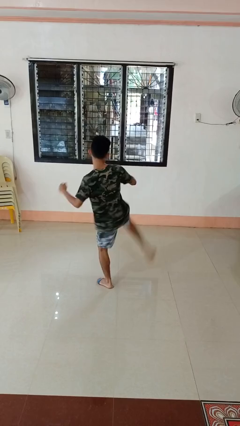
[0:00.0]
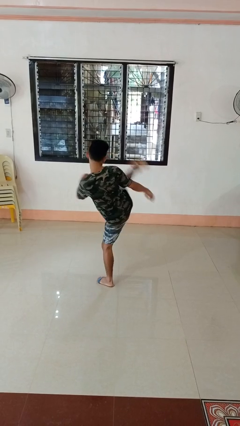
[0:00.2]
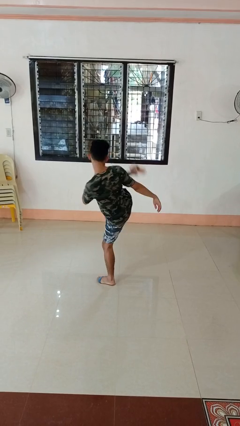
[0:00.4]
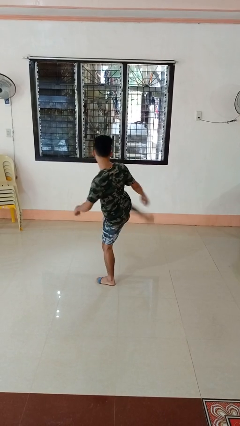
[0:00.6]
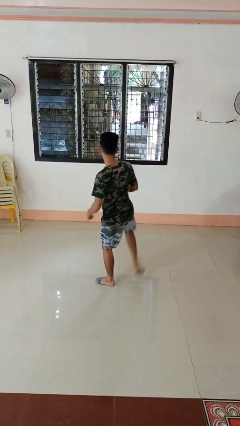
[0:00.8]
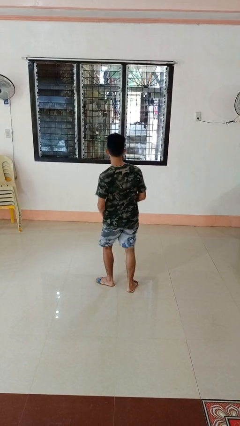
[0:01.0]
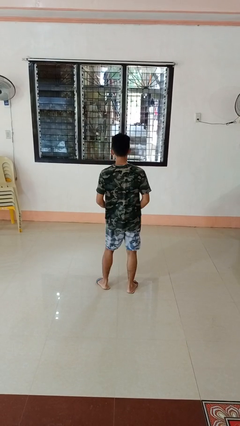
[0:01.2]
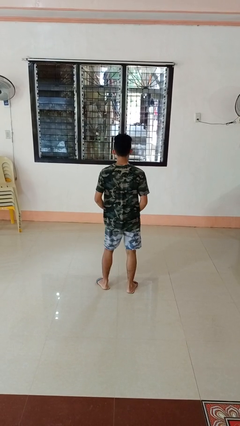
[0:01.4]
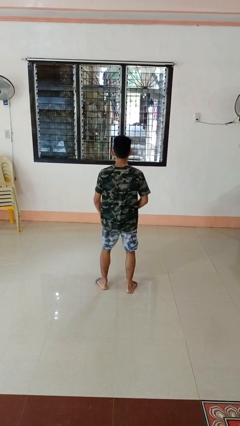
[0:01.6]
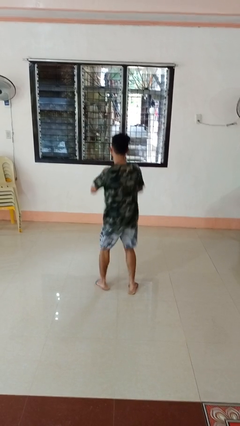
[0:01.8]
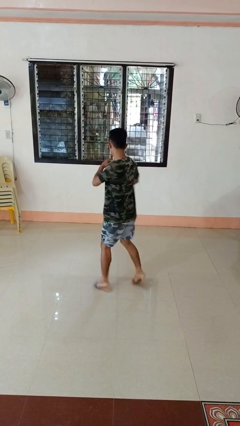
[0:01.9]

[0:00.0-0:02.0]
person karate kicks

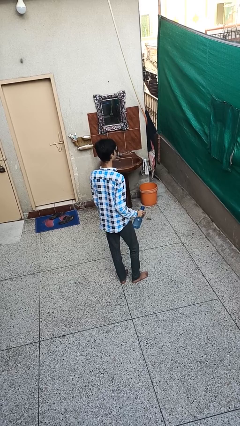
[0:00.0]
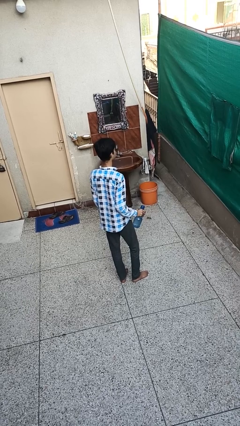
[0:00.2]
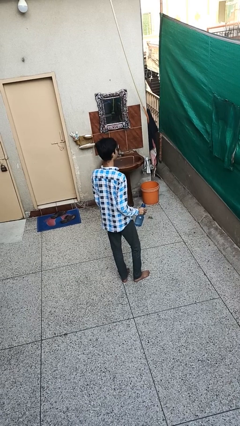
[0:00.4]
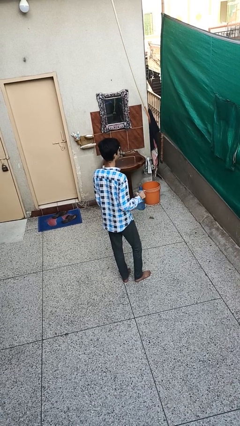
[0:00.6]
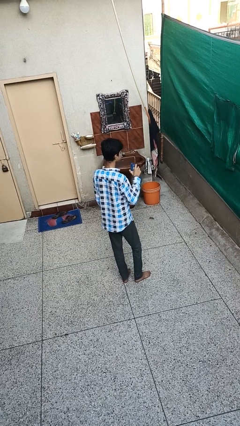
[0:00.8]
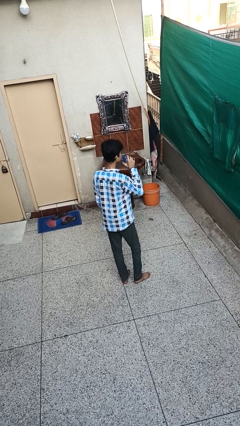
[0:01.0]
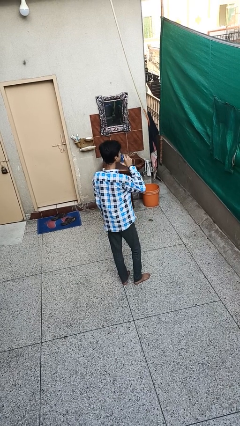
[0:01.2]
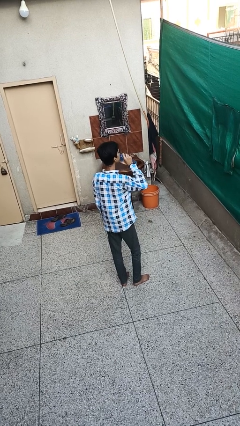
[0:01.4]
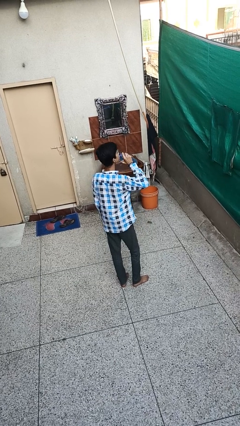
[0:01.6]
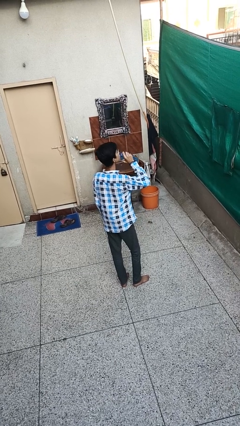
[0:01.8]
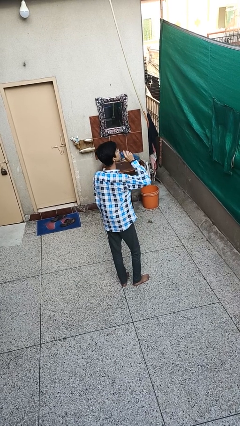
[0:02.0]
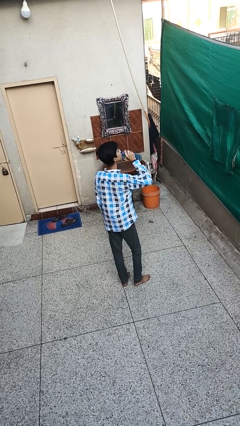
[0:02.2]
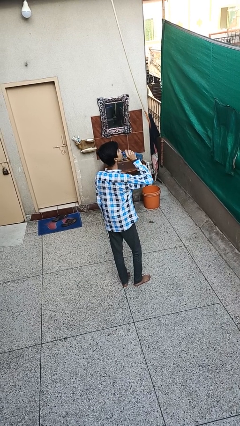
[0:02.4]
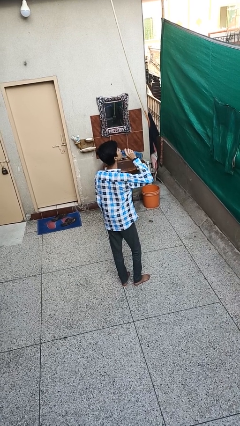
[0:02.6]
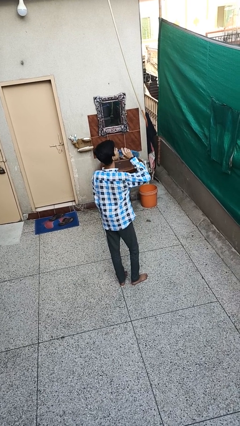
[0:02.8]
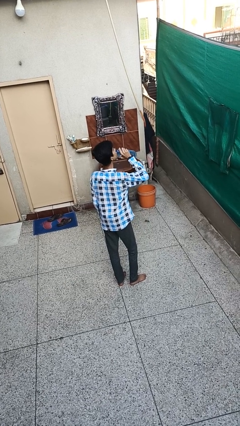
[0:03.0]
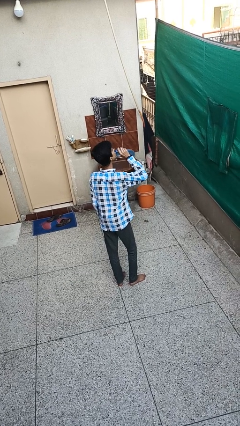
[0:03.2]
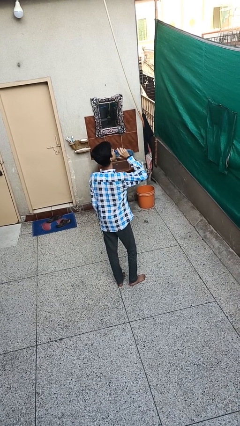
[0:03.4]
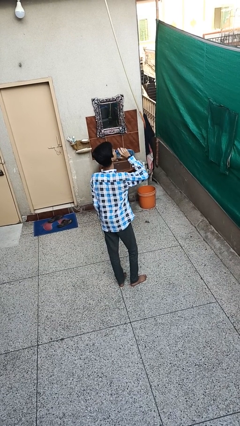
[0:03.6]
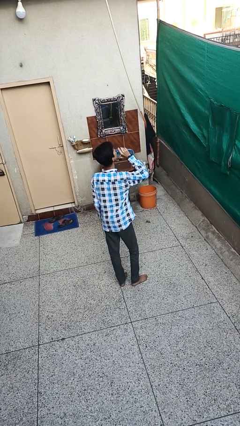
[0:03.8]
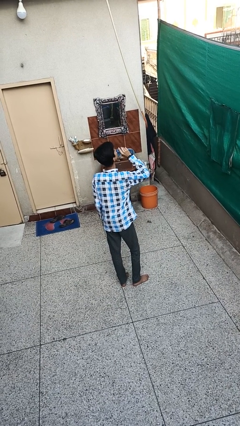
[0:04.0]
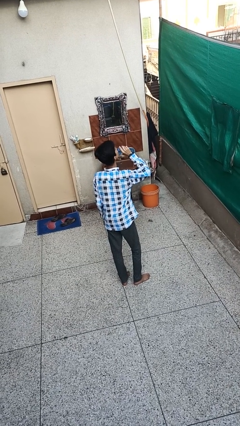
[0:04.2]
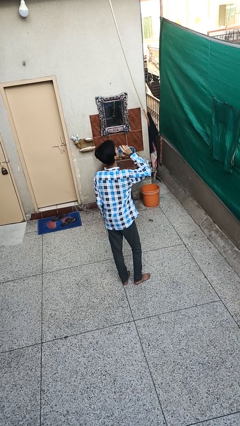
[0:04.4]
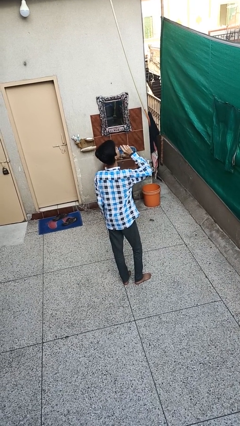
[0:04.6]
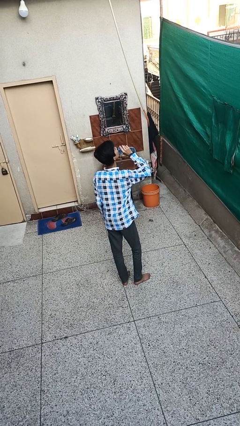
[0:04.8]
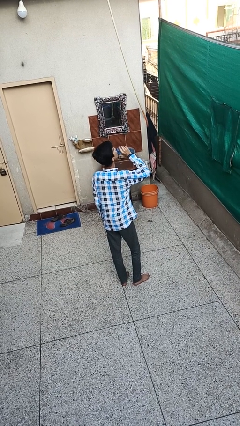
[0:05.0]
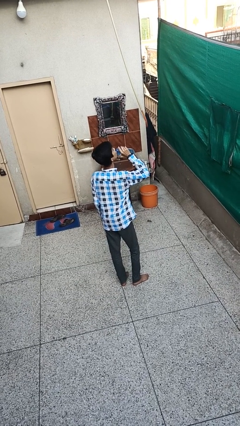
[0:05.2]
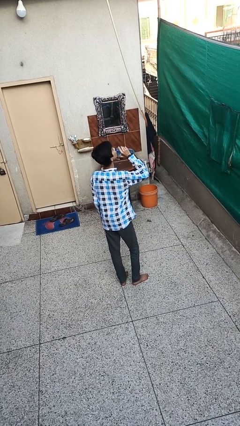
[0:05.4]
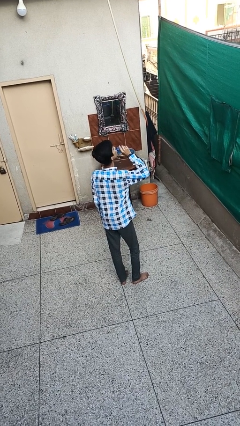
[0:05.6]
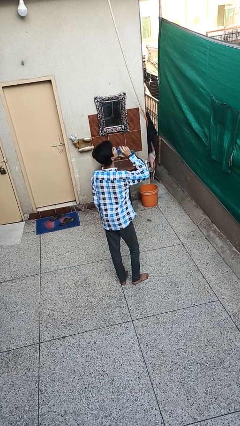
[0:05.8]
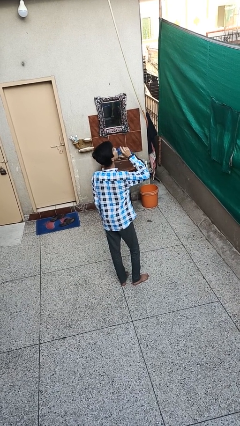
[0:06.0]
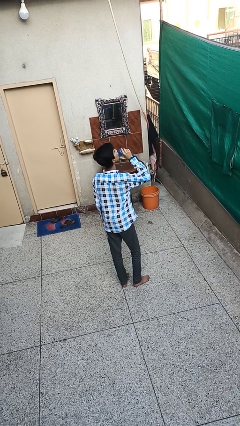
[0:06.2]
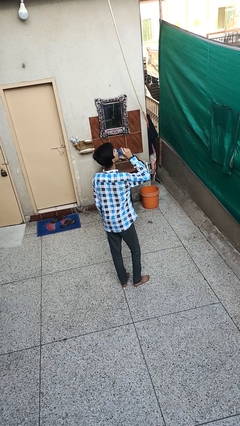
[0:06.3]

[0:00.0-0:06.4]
person drinks from bottle

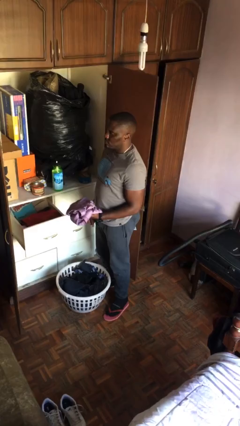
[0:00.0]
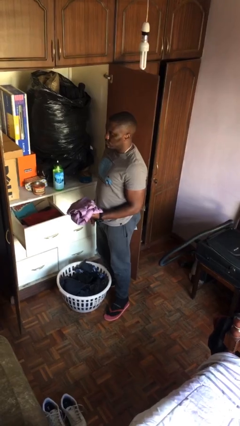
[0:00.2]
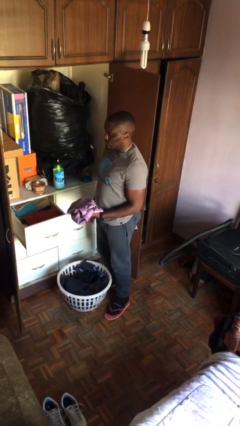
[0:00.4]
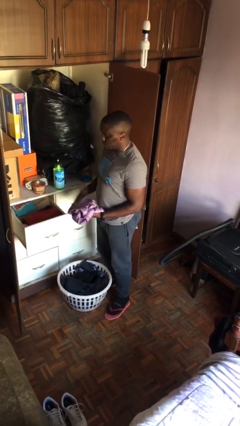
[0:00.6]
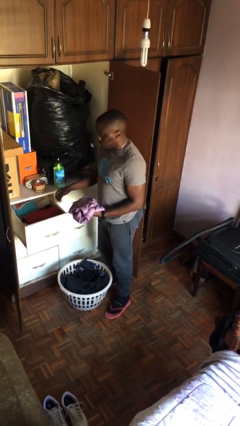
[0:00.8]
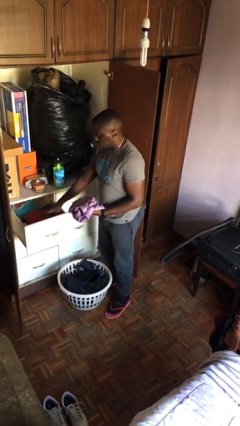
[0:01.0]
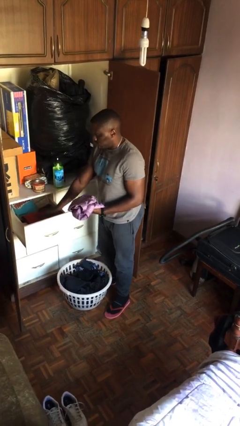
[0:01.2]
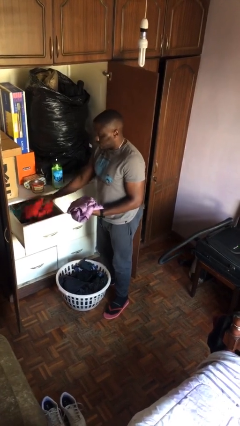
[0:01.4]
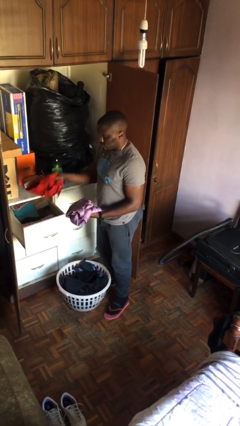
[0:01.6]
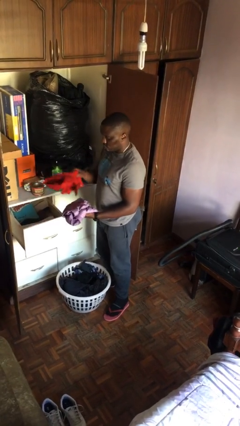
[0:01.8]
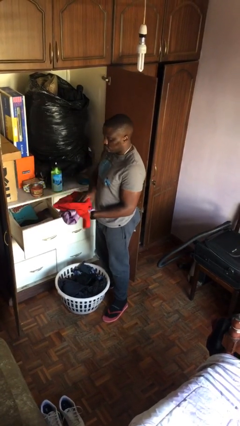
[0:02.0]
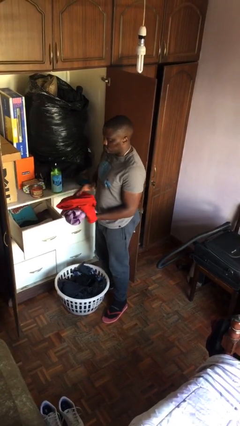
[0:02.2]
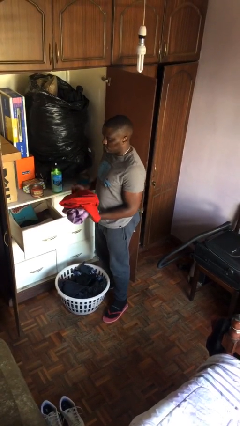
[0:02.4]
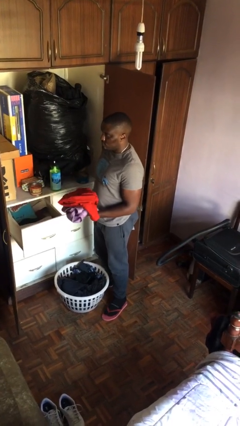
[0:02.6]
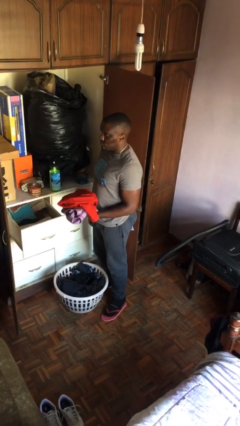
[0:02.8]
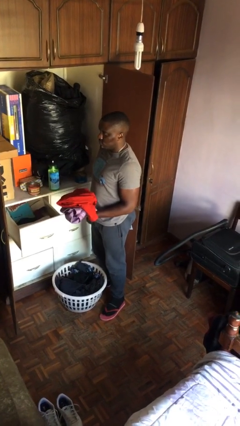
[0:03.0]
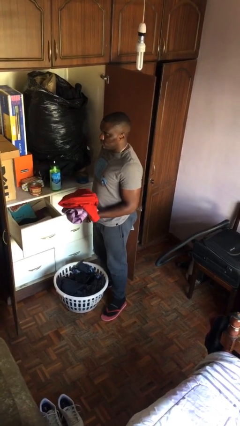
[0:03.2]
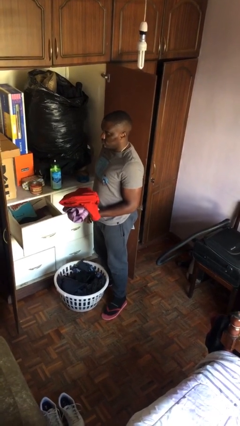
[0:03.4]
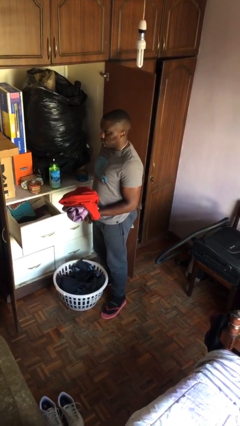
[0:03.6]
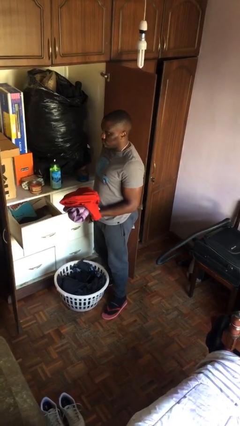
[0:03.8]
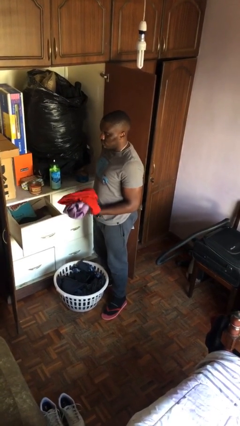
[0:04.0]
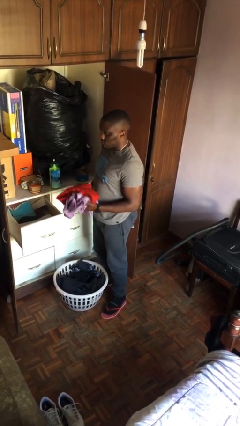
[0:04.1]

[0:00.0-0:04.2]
person takes clothes from dresser

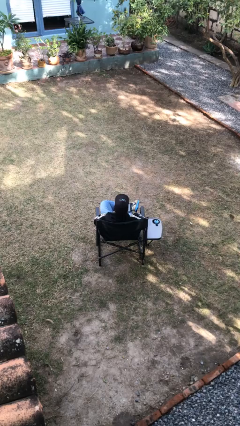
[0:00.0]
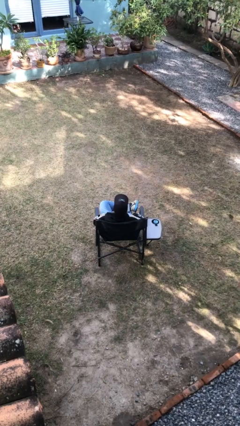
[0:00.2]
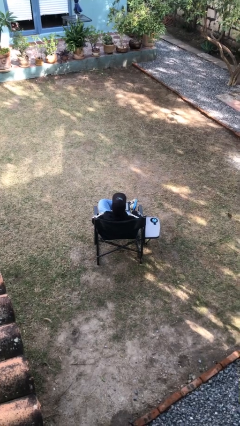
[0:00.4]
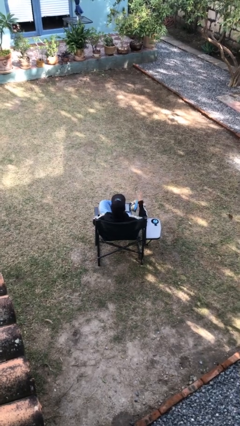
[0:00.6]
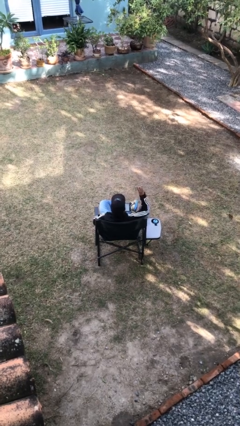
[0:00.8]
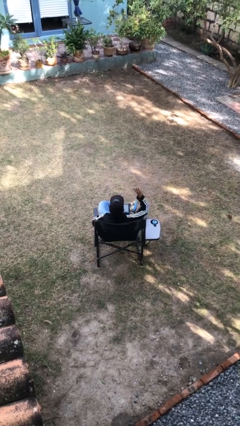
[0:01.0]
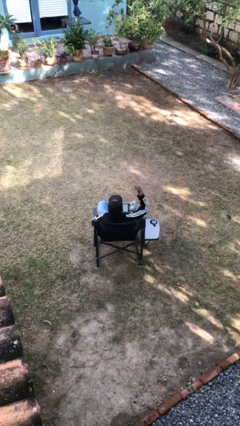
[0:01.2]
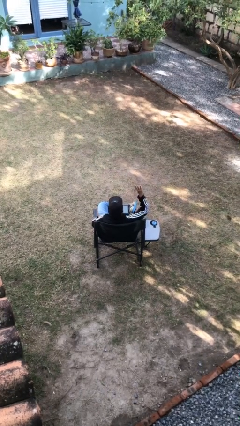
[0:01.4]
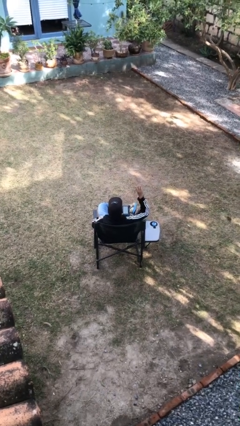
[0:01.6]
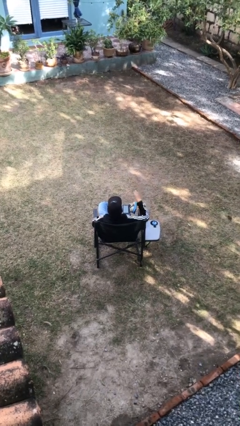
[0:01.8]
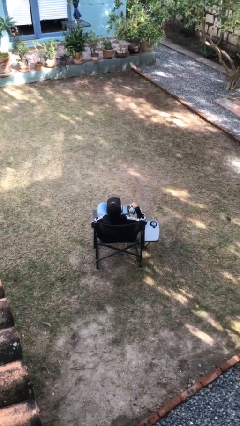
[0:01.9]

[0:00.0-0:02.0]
person gestures number three

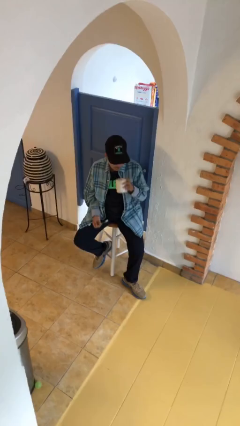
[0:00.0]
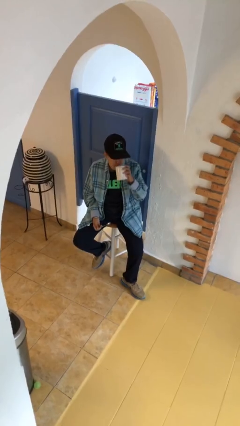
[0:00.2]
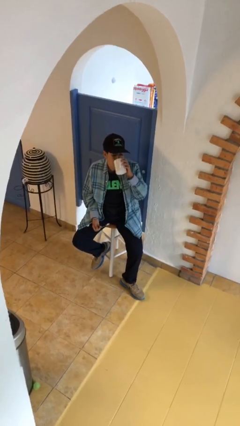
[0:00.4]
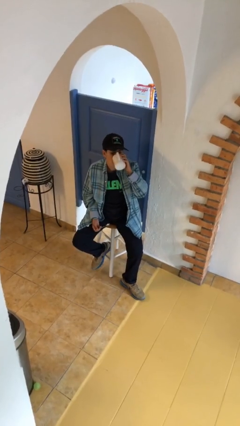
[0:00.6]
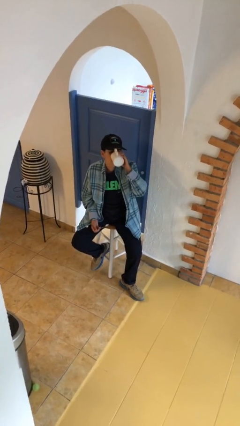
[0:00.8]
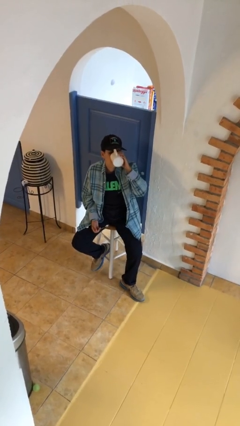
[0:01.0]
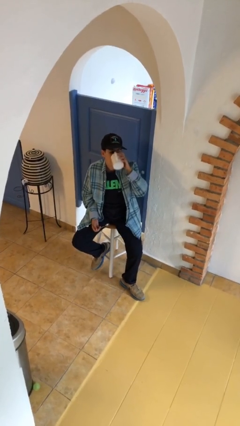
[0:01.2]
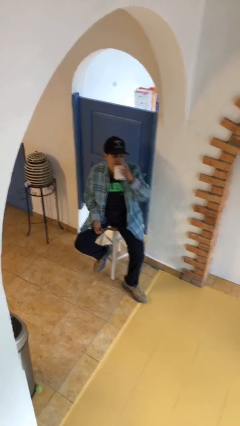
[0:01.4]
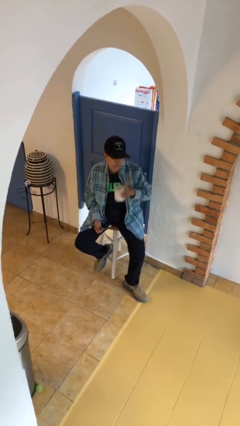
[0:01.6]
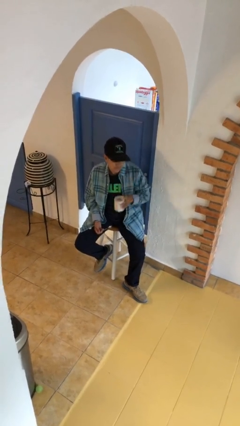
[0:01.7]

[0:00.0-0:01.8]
person drinks from mug

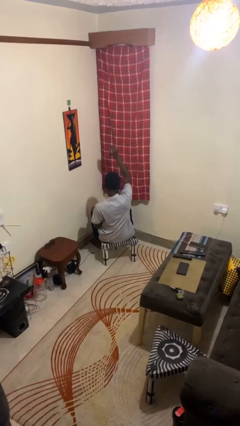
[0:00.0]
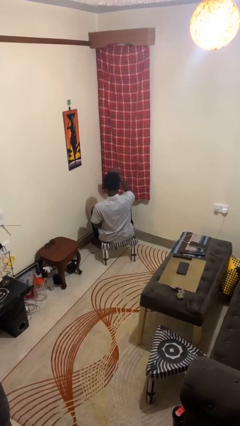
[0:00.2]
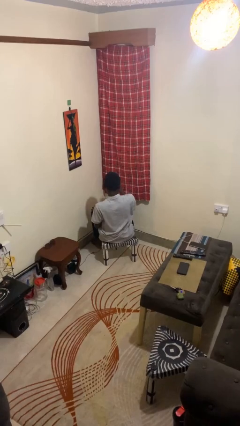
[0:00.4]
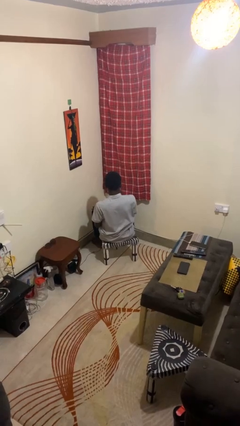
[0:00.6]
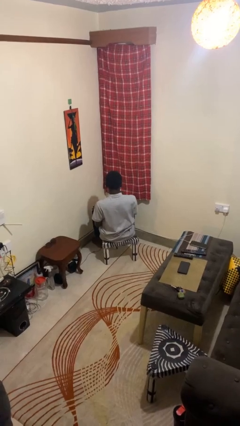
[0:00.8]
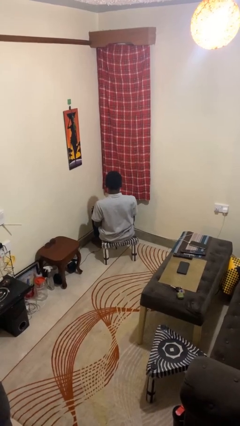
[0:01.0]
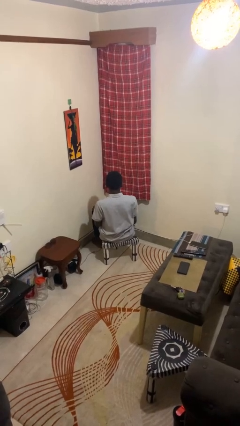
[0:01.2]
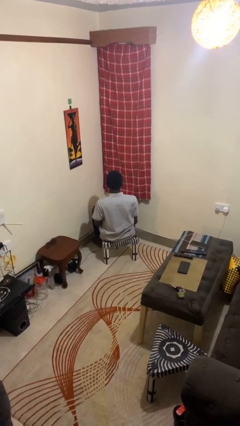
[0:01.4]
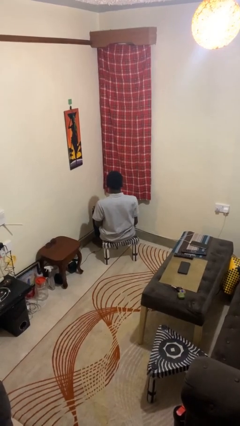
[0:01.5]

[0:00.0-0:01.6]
person gestures lower hand
